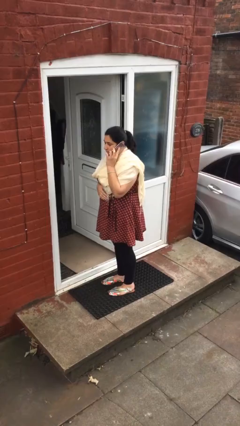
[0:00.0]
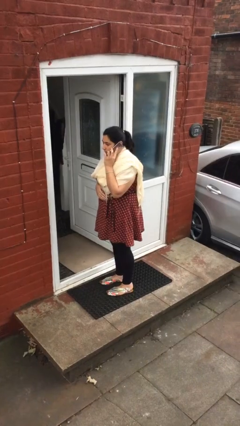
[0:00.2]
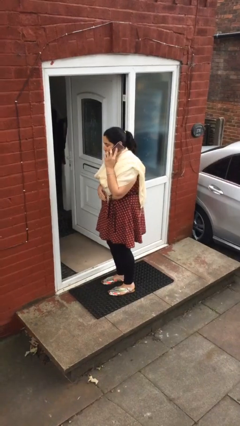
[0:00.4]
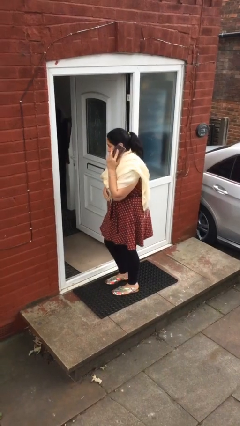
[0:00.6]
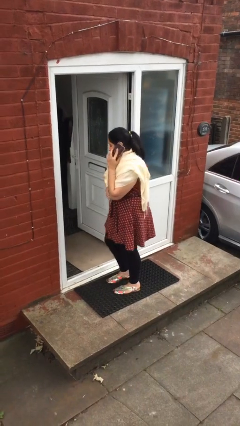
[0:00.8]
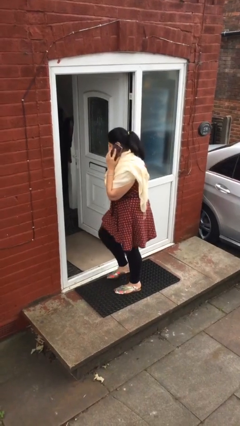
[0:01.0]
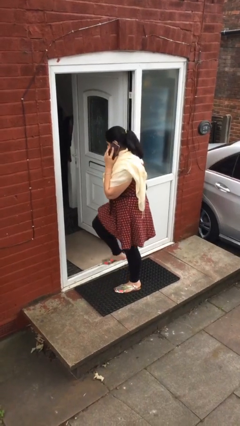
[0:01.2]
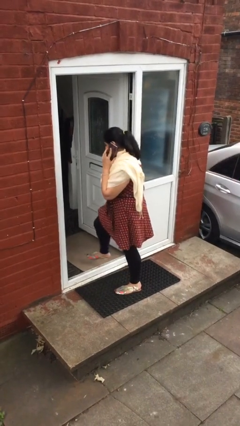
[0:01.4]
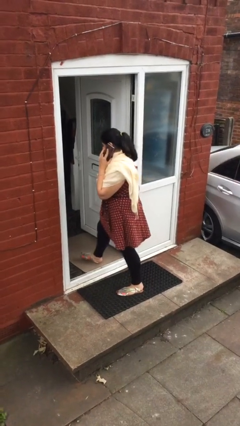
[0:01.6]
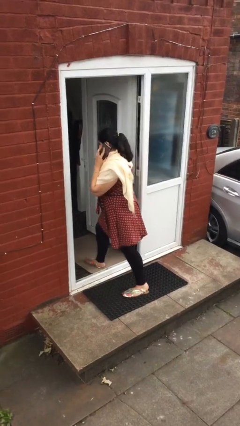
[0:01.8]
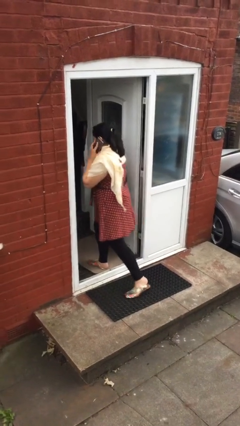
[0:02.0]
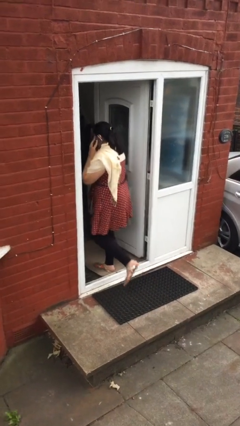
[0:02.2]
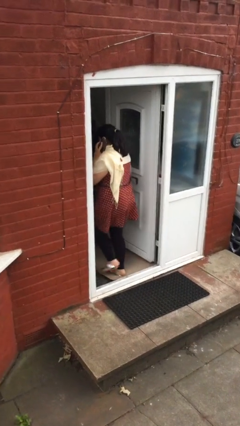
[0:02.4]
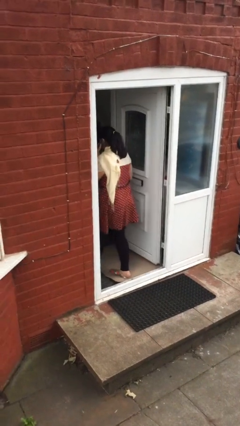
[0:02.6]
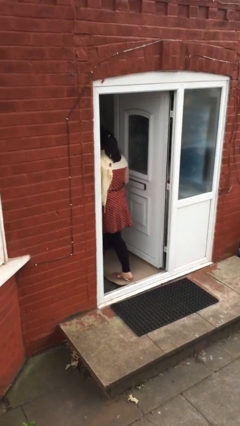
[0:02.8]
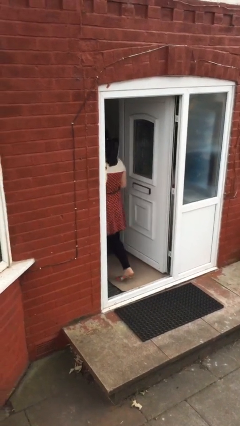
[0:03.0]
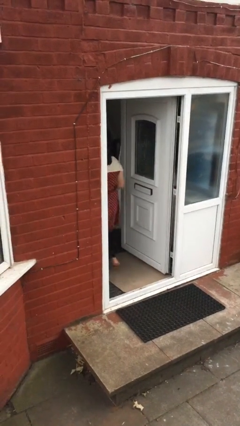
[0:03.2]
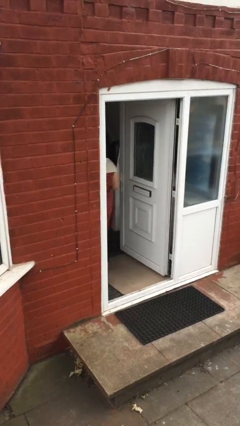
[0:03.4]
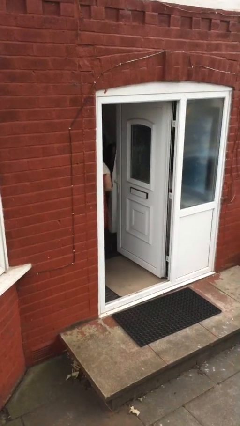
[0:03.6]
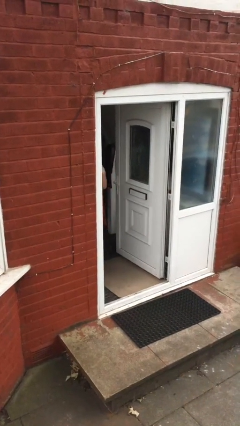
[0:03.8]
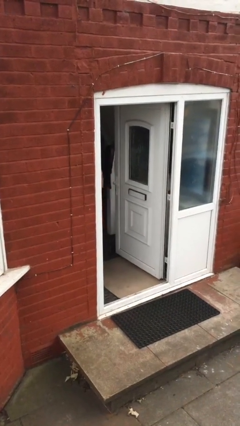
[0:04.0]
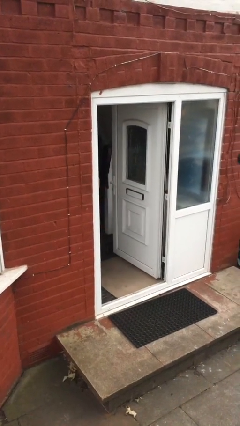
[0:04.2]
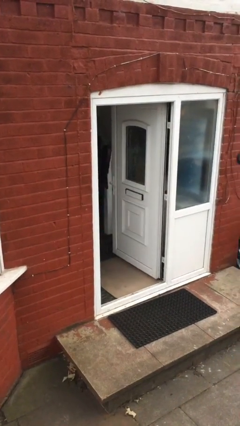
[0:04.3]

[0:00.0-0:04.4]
person exits scene through structure

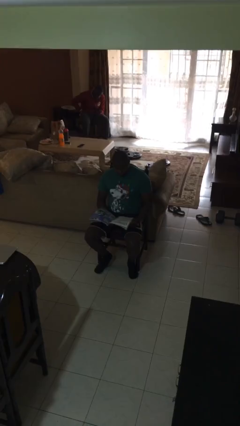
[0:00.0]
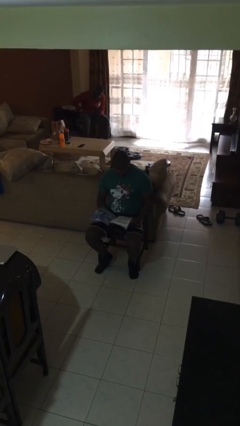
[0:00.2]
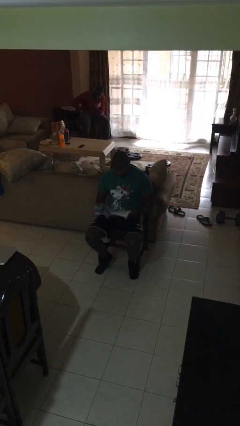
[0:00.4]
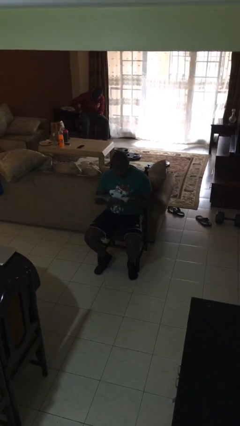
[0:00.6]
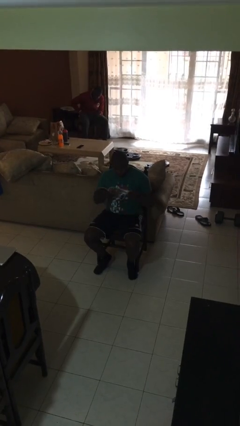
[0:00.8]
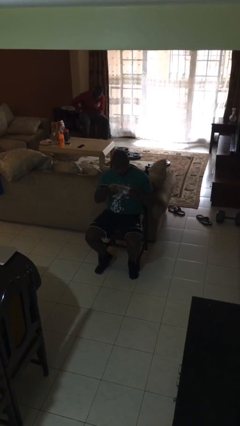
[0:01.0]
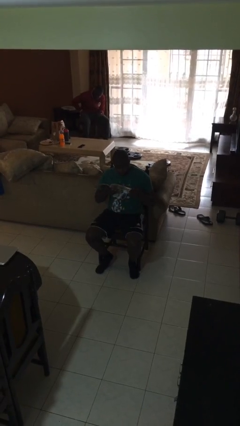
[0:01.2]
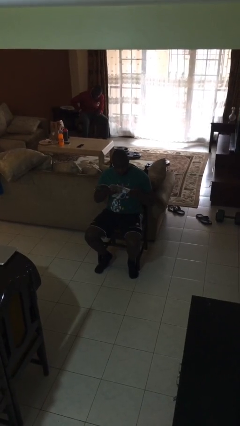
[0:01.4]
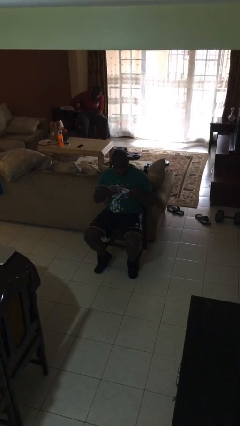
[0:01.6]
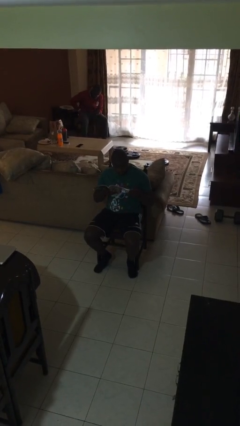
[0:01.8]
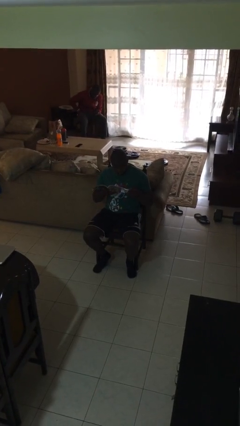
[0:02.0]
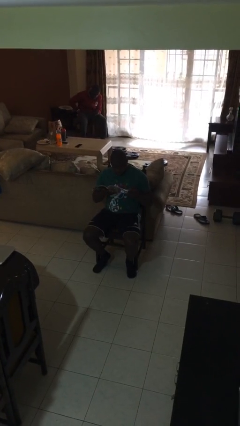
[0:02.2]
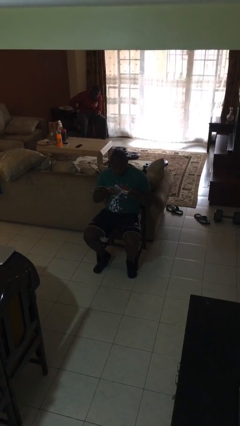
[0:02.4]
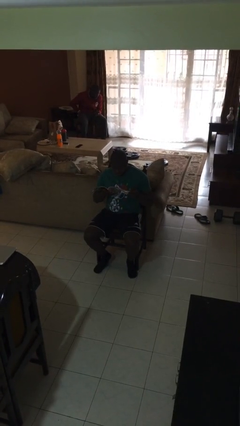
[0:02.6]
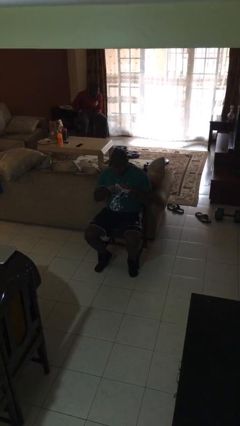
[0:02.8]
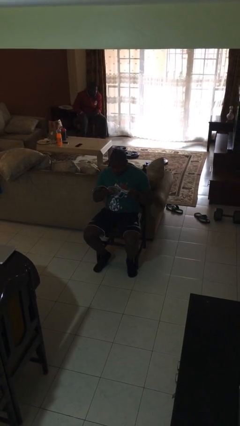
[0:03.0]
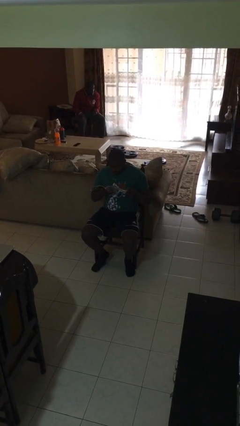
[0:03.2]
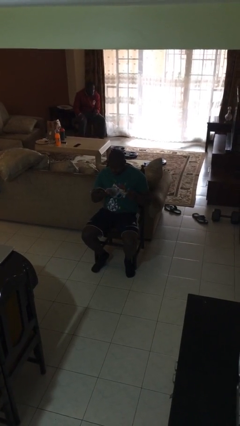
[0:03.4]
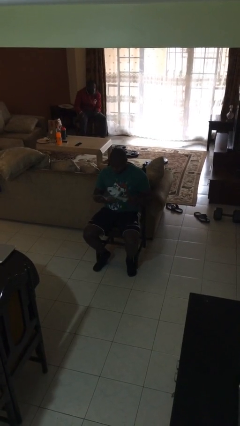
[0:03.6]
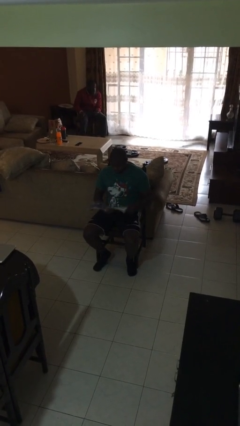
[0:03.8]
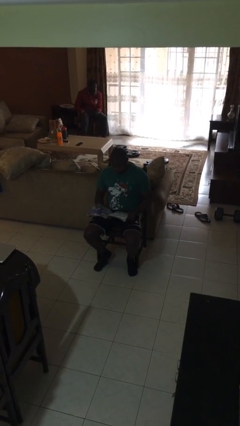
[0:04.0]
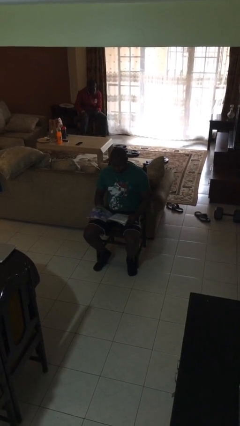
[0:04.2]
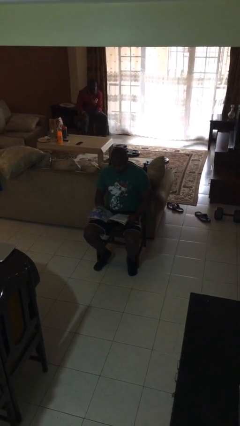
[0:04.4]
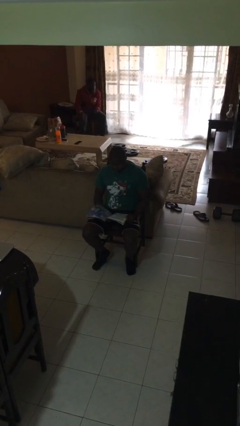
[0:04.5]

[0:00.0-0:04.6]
person reads document

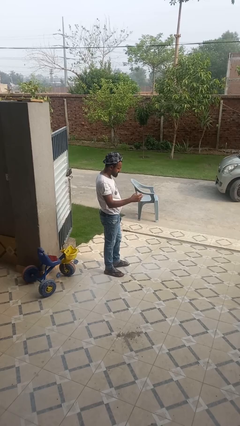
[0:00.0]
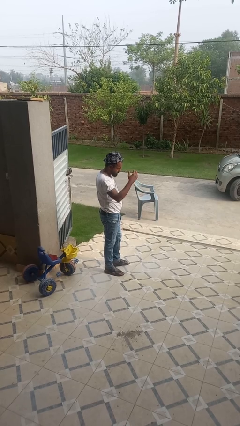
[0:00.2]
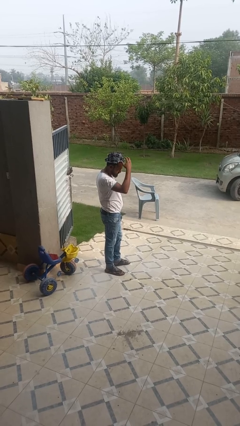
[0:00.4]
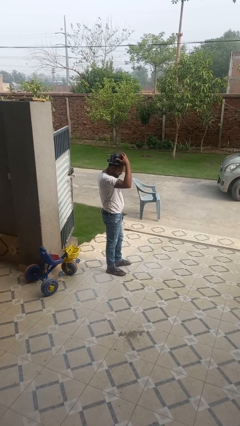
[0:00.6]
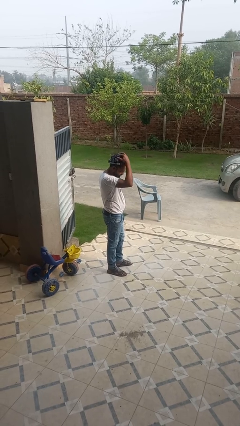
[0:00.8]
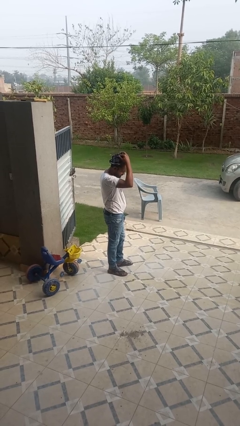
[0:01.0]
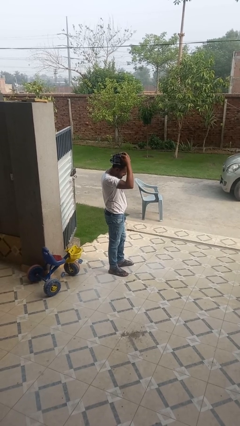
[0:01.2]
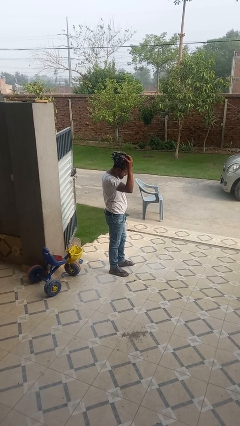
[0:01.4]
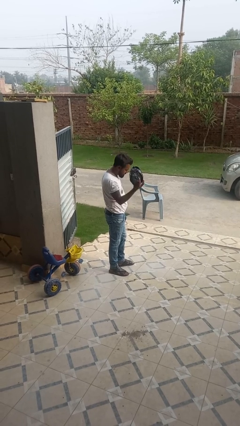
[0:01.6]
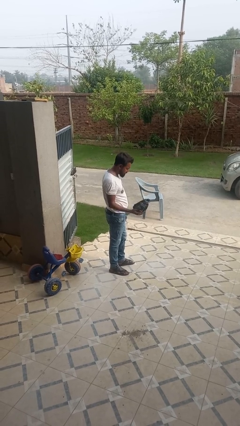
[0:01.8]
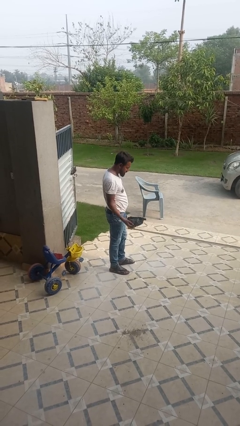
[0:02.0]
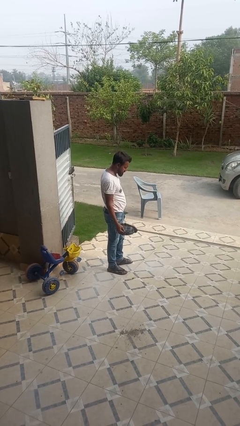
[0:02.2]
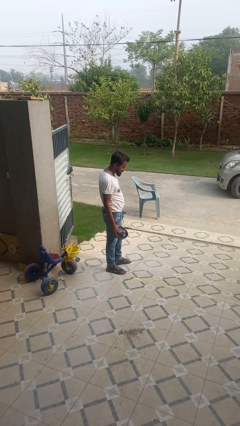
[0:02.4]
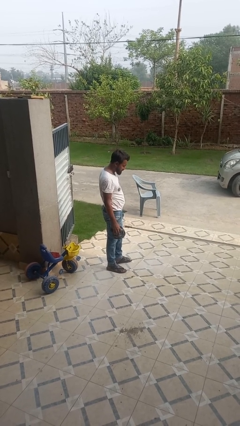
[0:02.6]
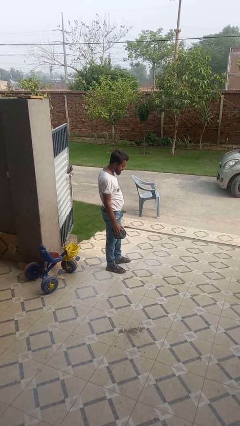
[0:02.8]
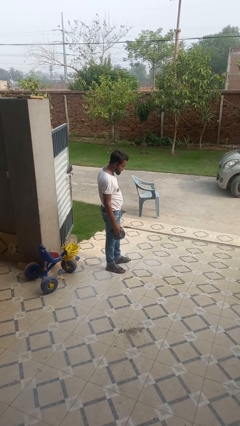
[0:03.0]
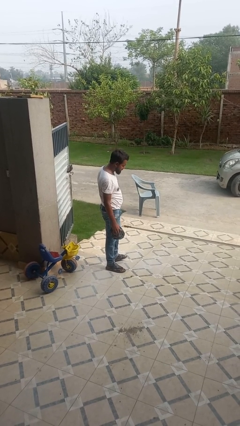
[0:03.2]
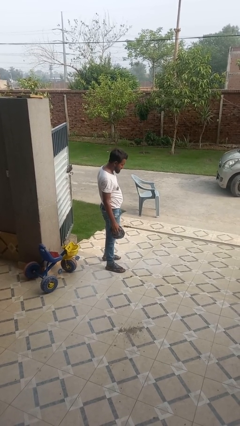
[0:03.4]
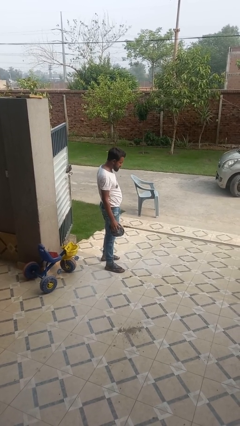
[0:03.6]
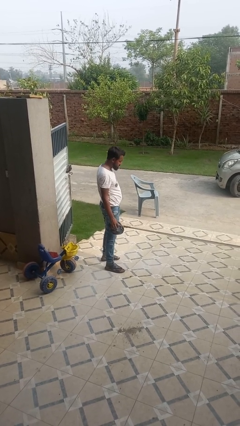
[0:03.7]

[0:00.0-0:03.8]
person takes off hat

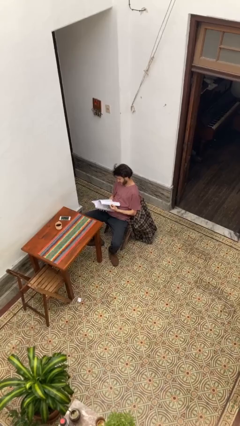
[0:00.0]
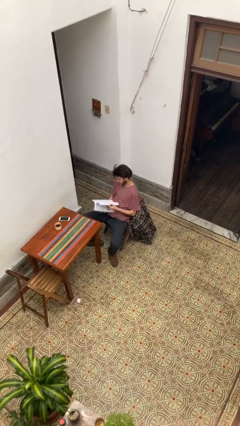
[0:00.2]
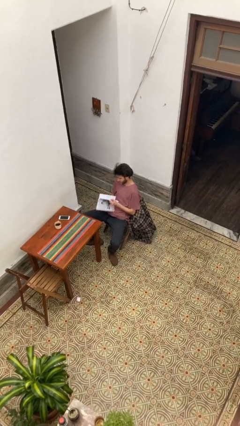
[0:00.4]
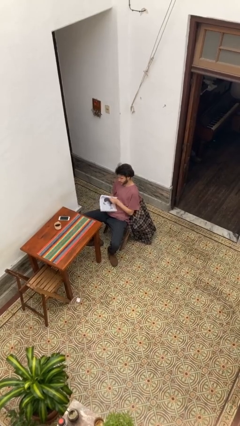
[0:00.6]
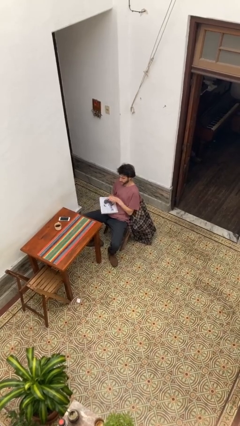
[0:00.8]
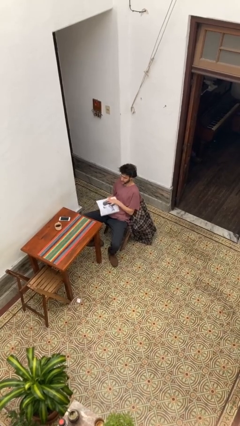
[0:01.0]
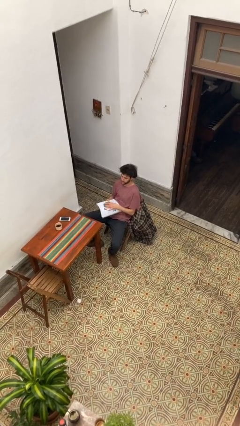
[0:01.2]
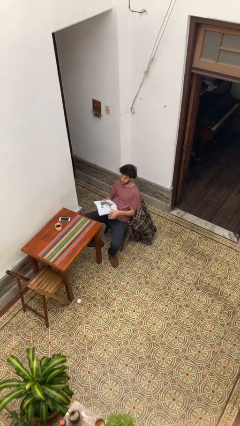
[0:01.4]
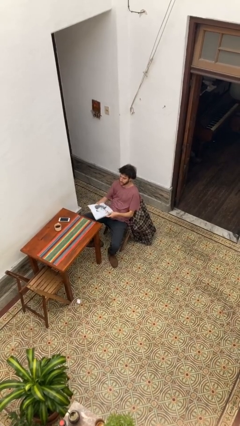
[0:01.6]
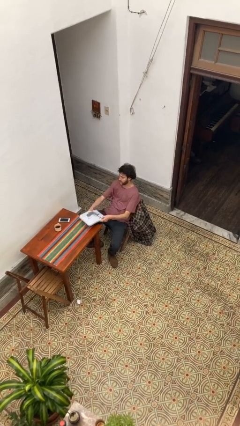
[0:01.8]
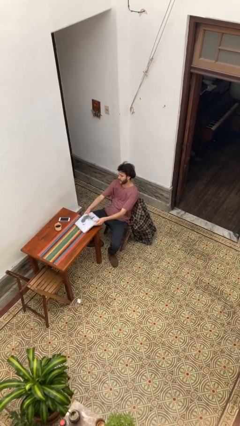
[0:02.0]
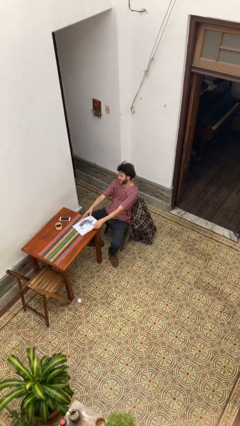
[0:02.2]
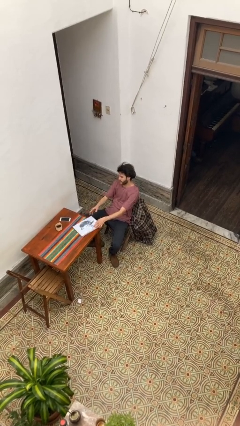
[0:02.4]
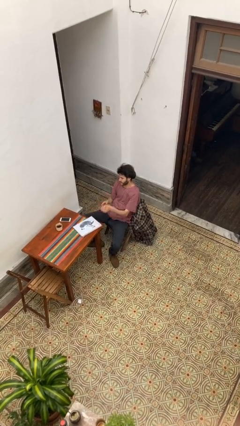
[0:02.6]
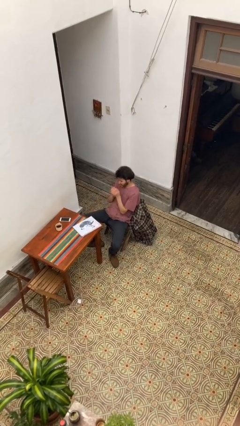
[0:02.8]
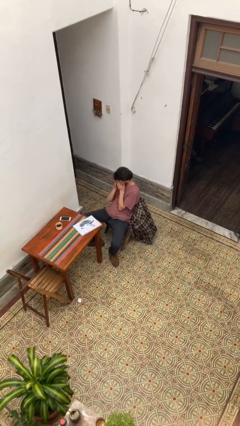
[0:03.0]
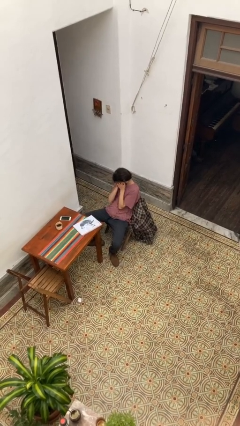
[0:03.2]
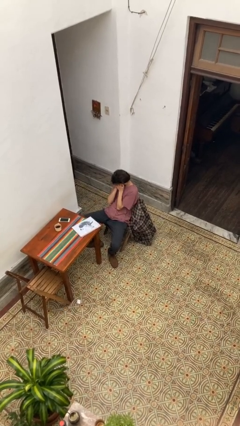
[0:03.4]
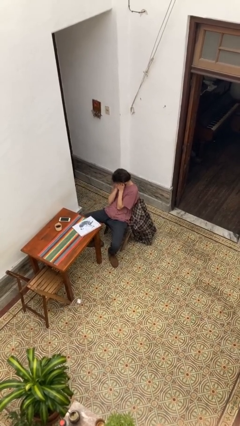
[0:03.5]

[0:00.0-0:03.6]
person puts down object on table

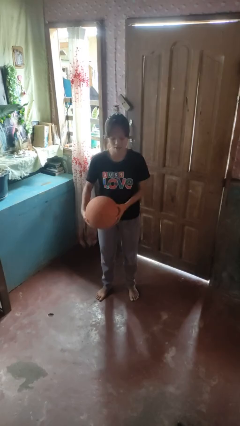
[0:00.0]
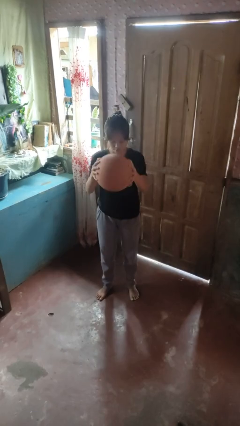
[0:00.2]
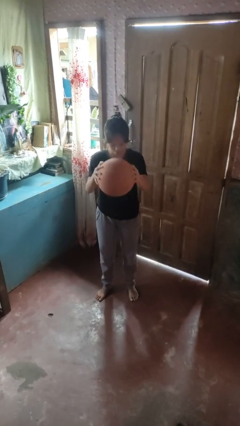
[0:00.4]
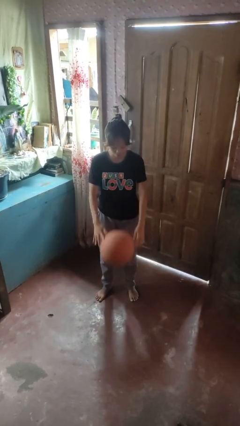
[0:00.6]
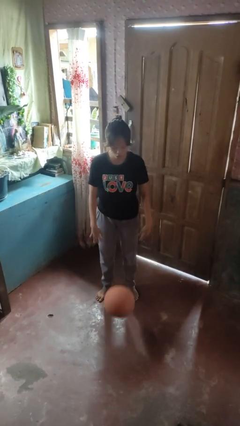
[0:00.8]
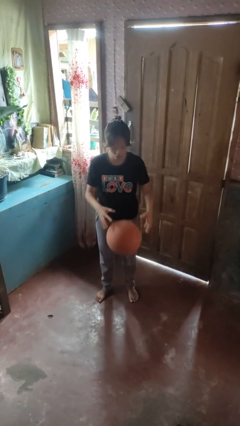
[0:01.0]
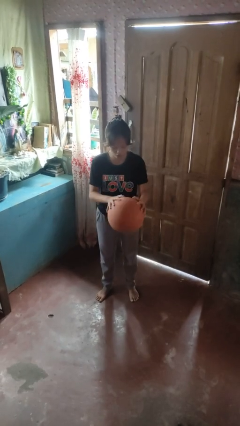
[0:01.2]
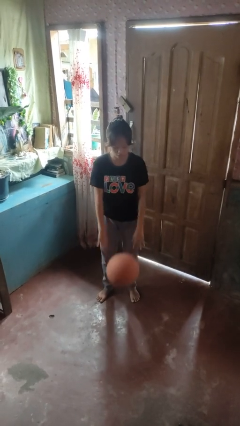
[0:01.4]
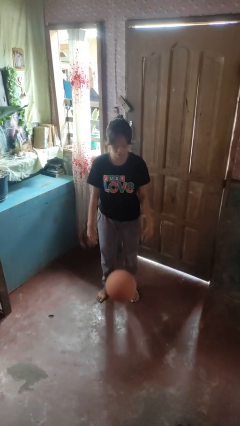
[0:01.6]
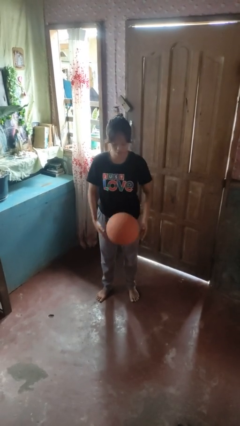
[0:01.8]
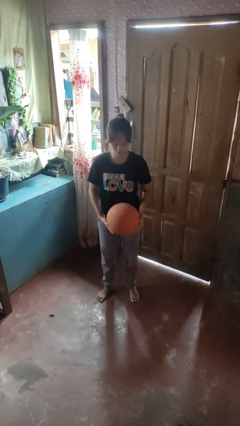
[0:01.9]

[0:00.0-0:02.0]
person bounces ball on floor
